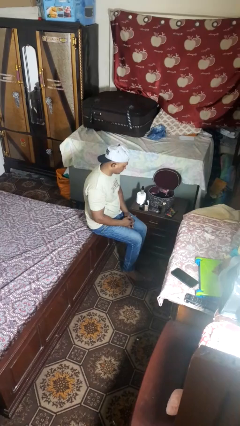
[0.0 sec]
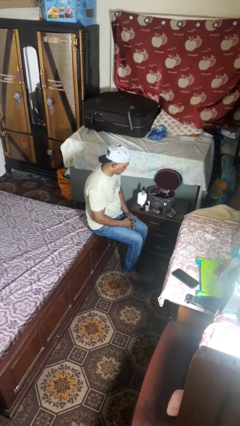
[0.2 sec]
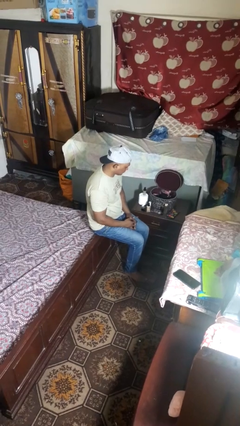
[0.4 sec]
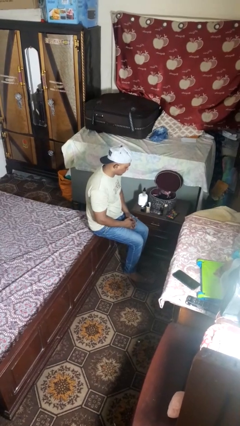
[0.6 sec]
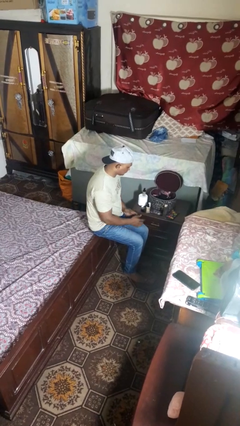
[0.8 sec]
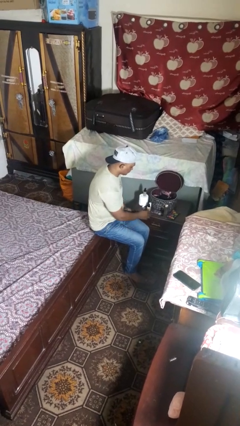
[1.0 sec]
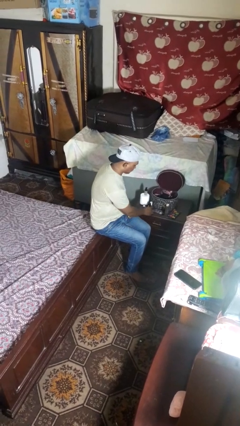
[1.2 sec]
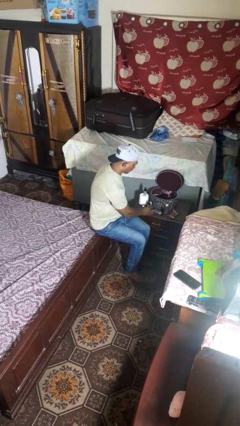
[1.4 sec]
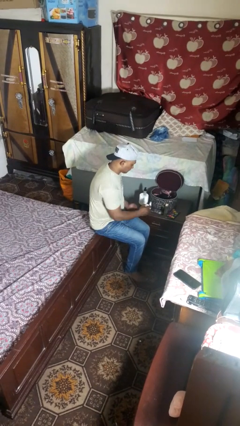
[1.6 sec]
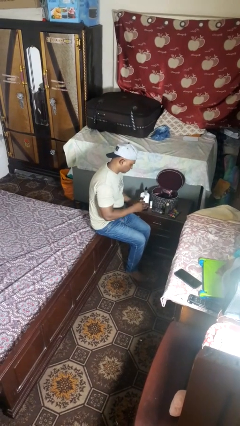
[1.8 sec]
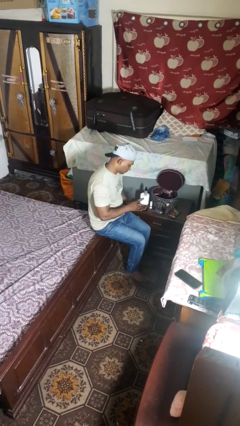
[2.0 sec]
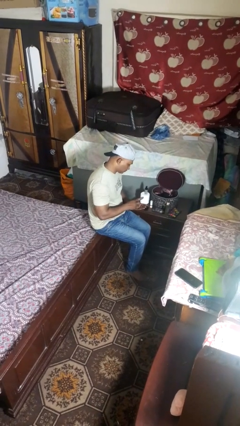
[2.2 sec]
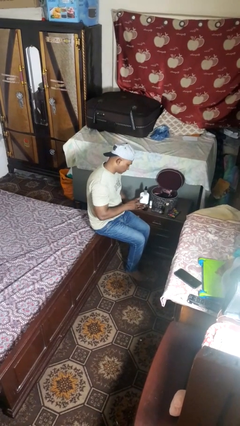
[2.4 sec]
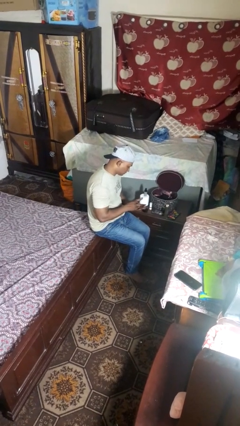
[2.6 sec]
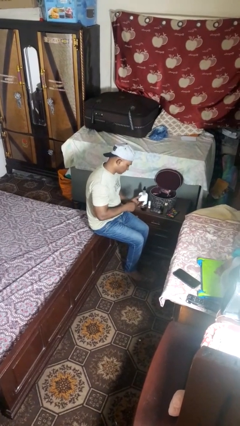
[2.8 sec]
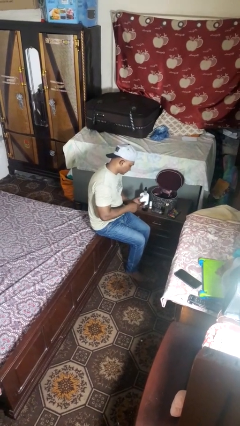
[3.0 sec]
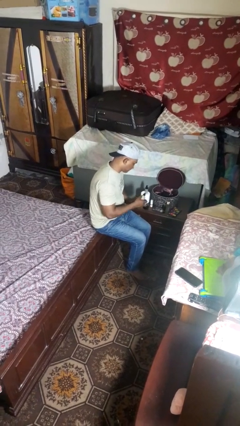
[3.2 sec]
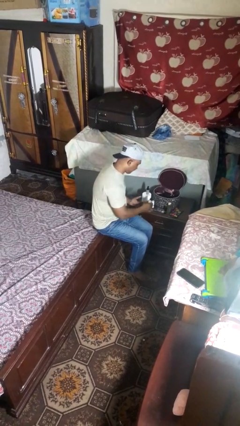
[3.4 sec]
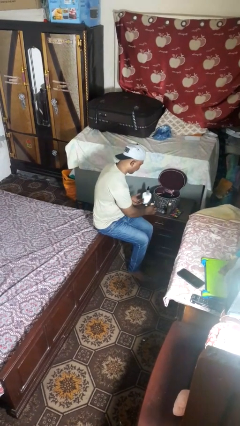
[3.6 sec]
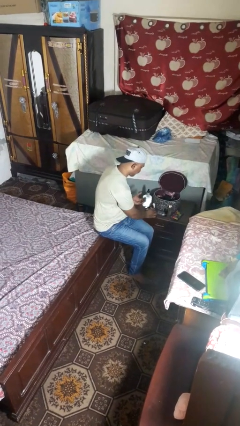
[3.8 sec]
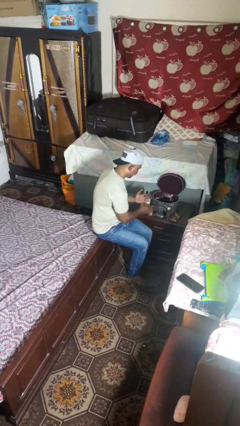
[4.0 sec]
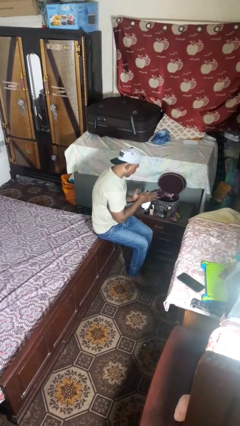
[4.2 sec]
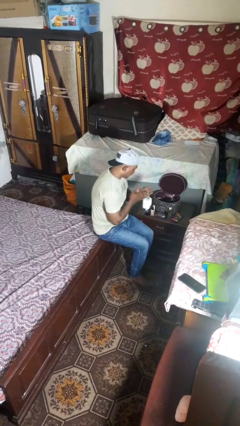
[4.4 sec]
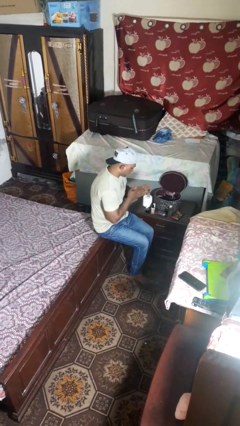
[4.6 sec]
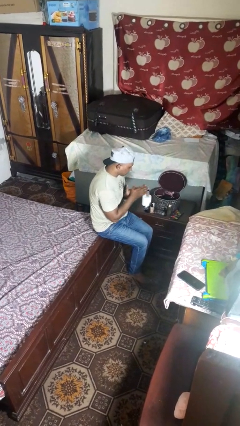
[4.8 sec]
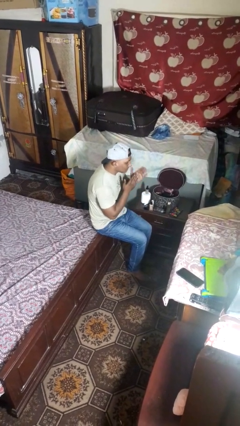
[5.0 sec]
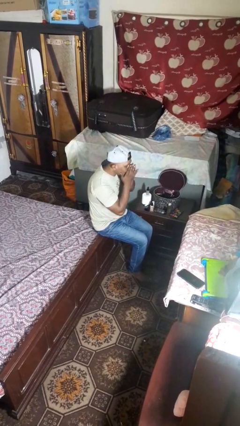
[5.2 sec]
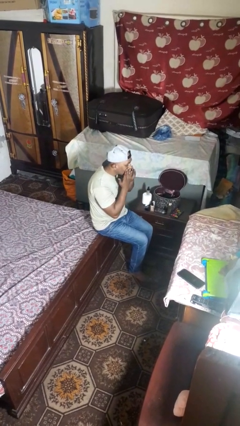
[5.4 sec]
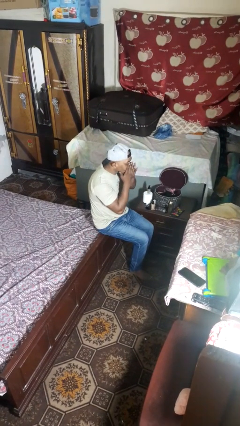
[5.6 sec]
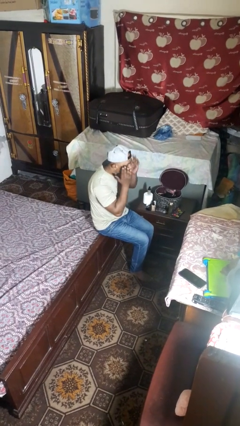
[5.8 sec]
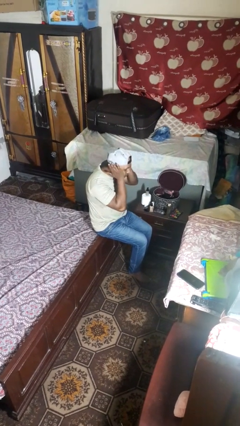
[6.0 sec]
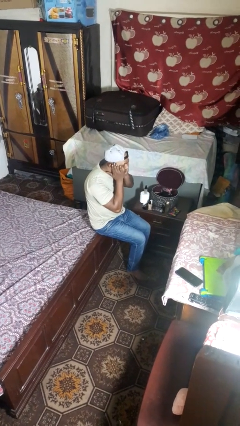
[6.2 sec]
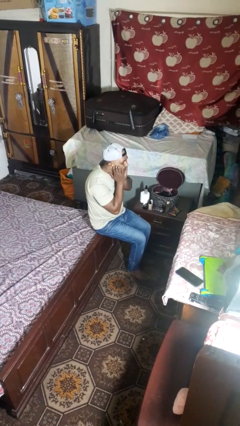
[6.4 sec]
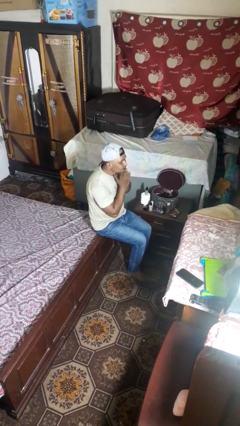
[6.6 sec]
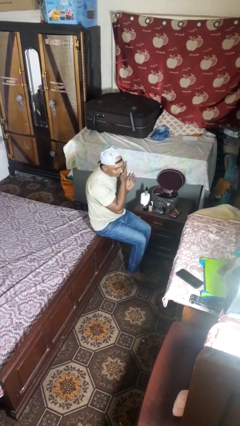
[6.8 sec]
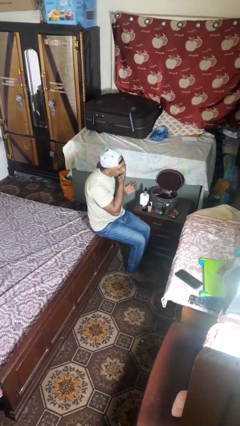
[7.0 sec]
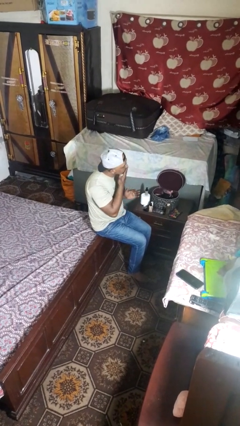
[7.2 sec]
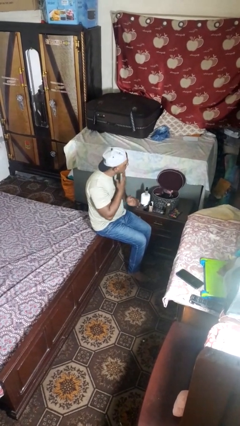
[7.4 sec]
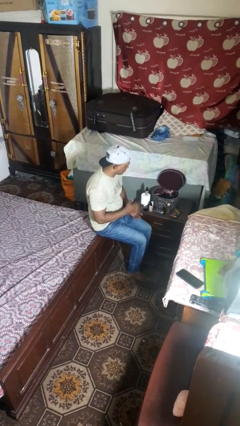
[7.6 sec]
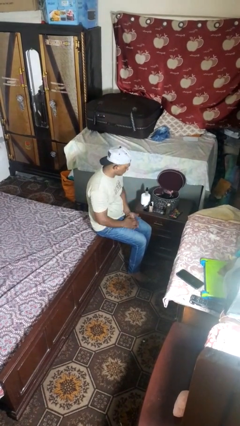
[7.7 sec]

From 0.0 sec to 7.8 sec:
person applies foundation makeup

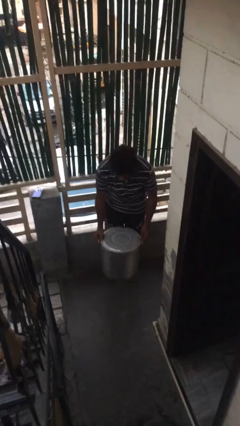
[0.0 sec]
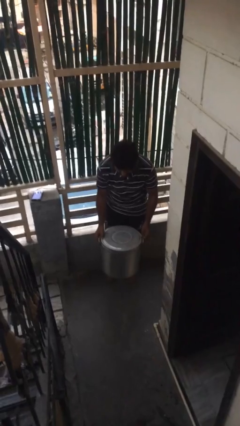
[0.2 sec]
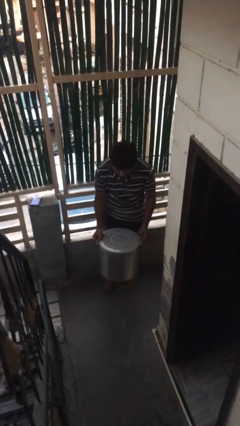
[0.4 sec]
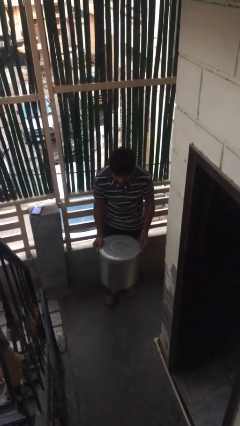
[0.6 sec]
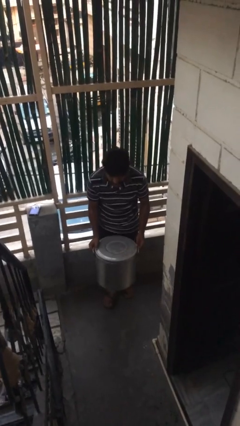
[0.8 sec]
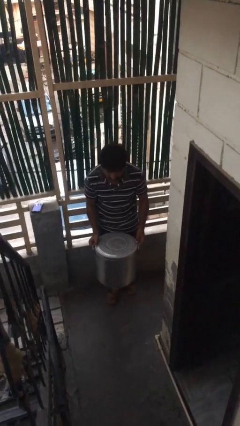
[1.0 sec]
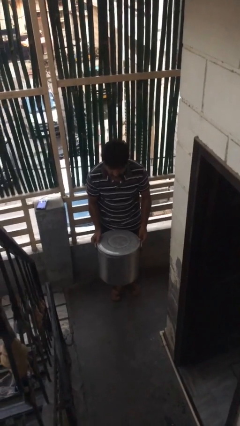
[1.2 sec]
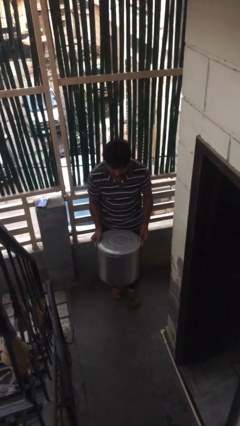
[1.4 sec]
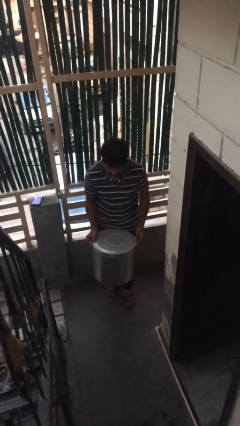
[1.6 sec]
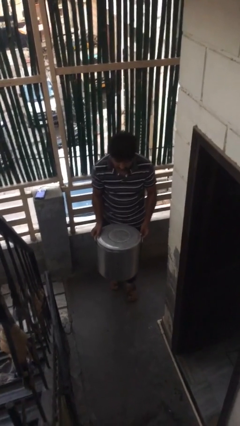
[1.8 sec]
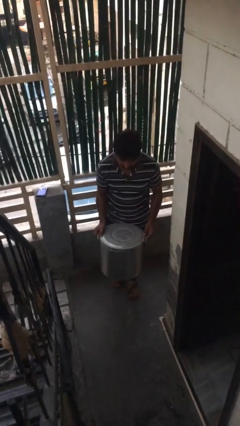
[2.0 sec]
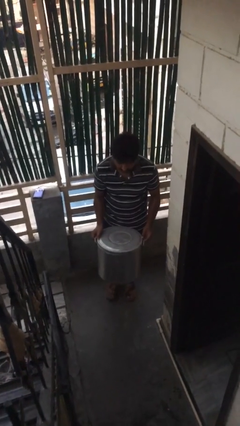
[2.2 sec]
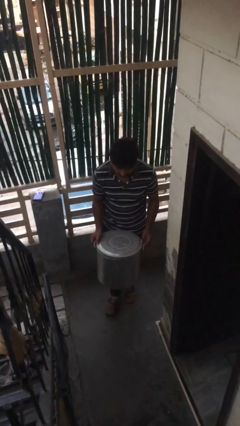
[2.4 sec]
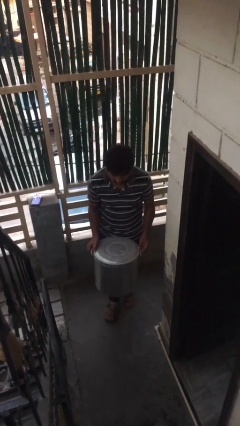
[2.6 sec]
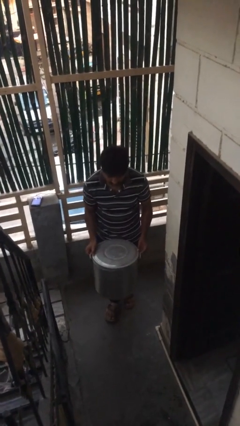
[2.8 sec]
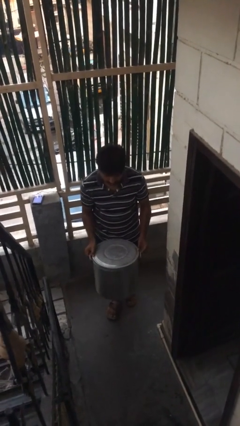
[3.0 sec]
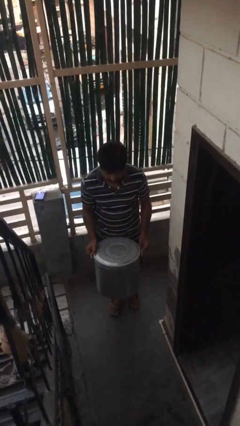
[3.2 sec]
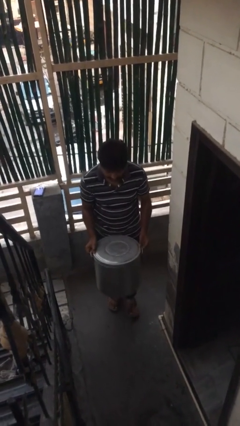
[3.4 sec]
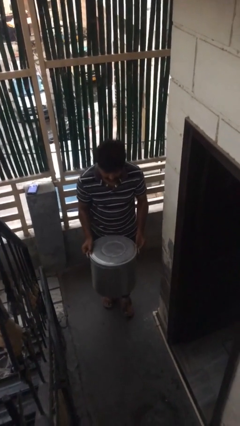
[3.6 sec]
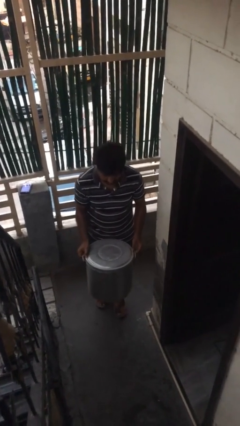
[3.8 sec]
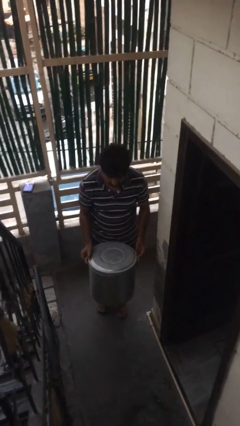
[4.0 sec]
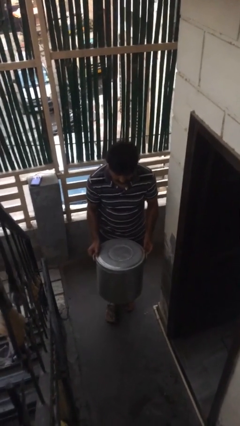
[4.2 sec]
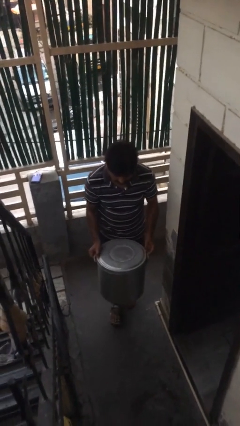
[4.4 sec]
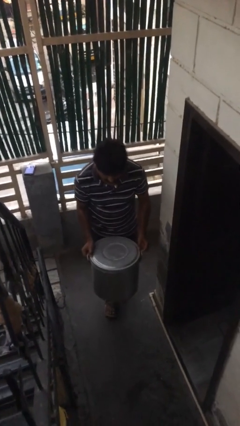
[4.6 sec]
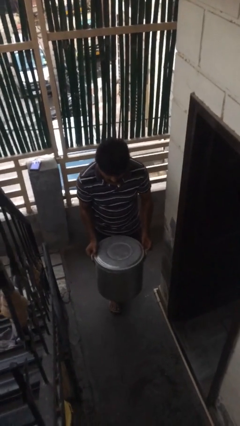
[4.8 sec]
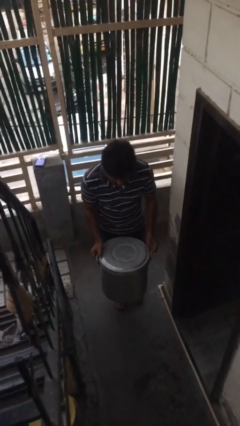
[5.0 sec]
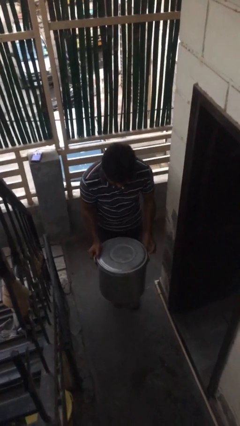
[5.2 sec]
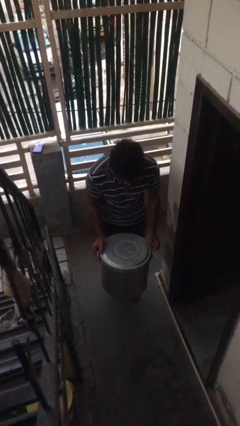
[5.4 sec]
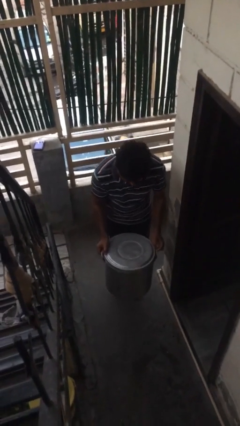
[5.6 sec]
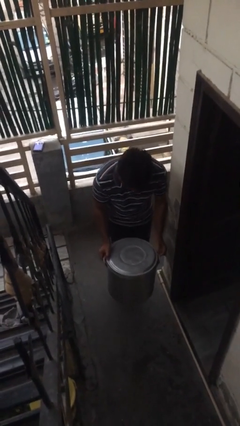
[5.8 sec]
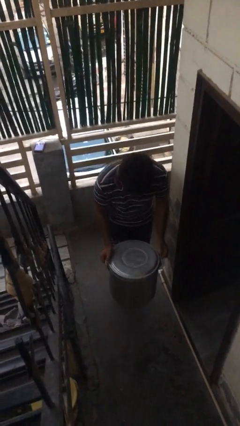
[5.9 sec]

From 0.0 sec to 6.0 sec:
person carries heavy object

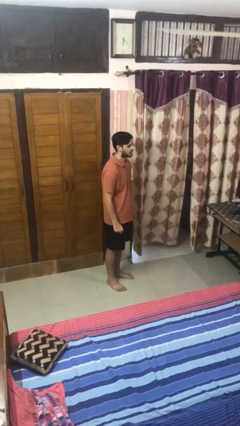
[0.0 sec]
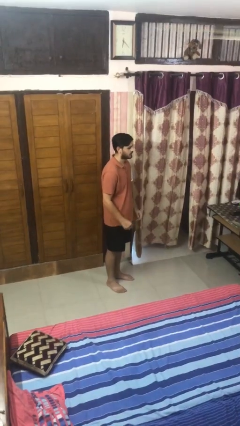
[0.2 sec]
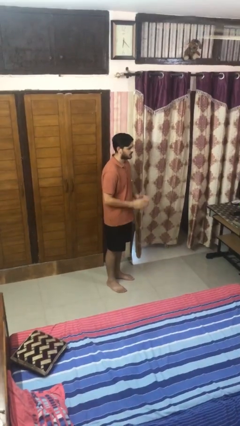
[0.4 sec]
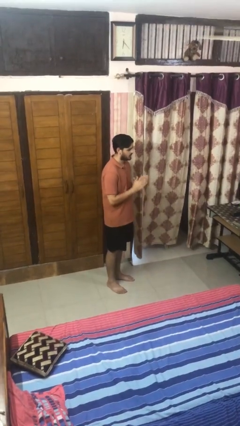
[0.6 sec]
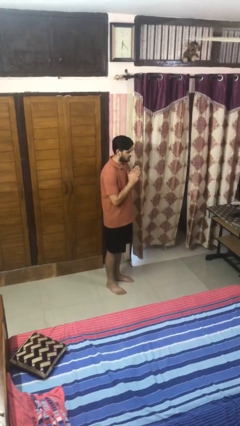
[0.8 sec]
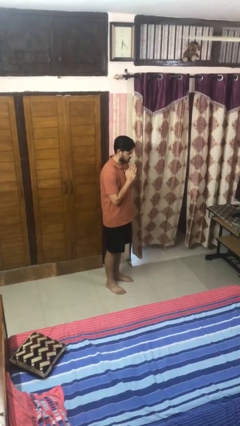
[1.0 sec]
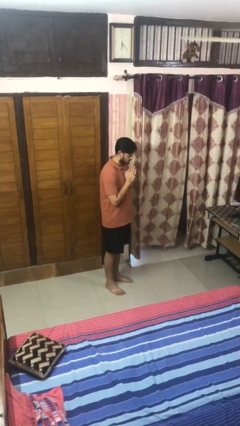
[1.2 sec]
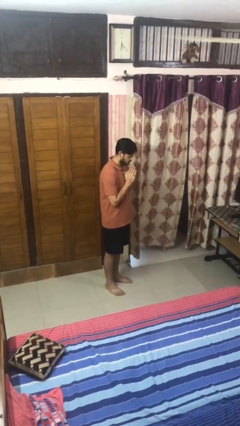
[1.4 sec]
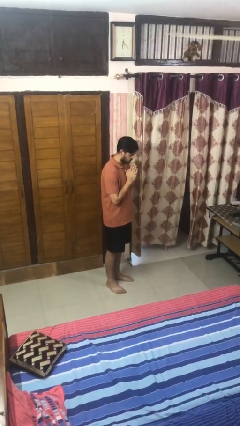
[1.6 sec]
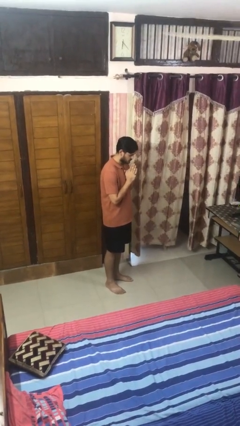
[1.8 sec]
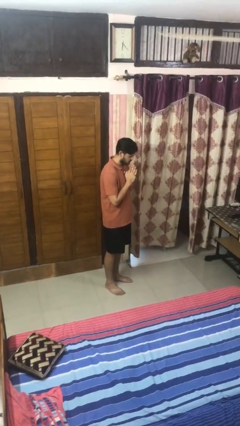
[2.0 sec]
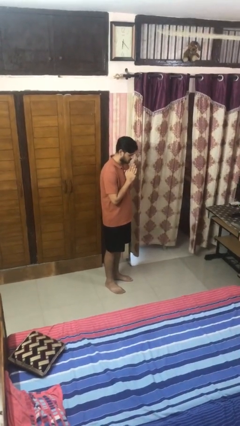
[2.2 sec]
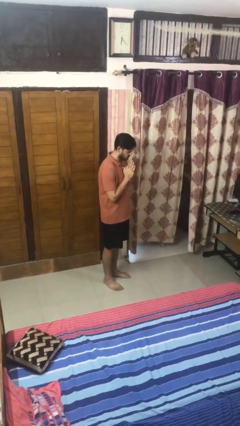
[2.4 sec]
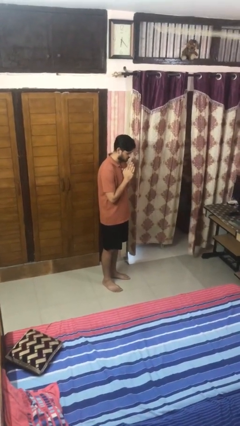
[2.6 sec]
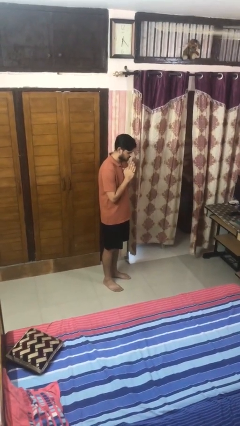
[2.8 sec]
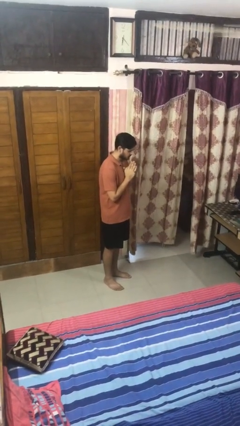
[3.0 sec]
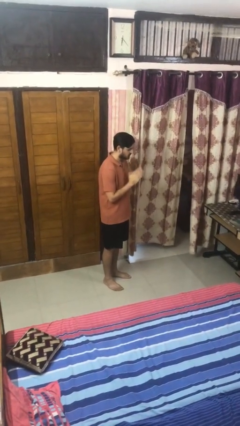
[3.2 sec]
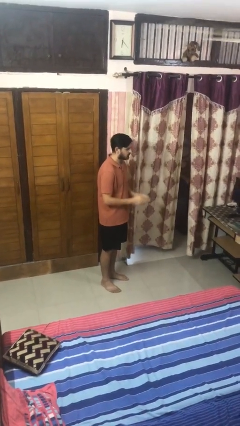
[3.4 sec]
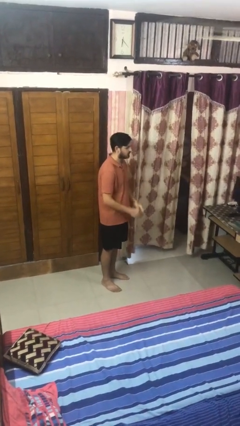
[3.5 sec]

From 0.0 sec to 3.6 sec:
person prays

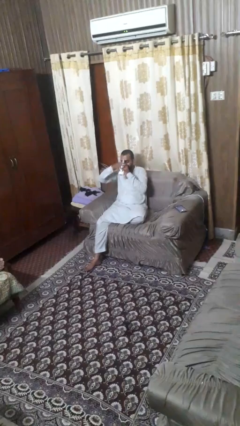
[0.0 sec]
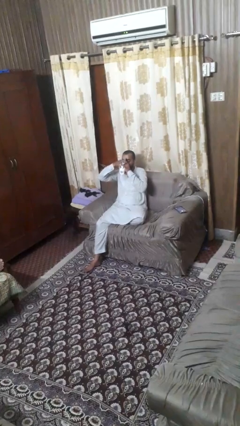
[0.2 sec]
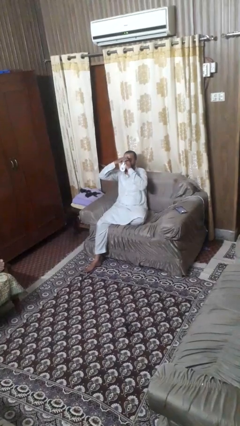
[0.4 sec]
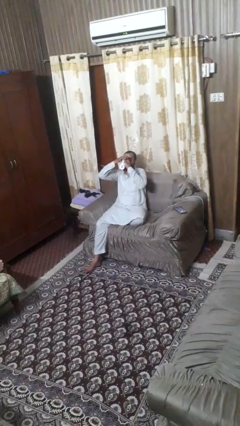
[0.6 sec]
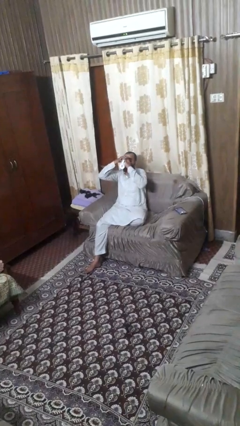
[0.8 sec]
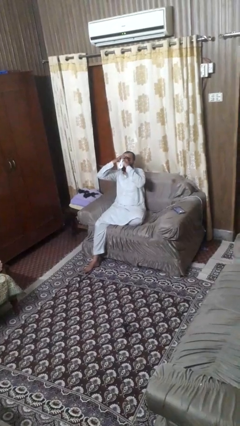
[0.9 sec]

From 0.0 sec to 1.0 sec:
person drinks from mug
